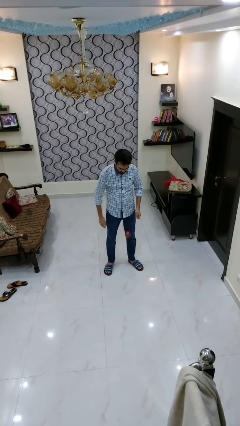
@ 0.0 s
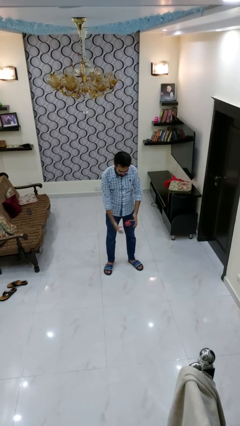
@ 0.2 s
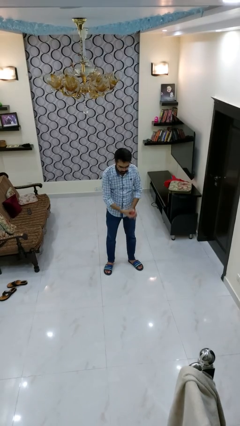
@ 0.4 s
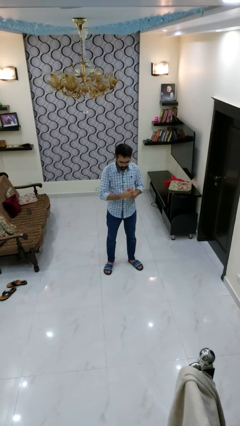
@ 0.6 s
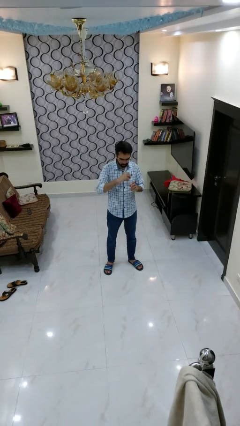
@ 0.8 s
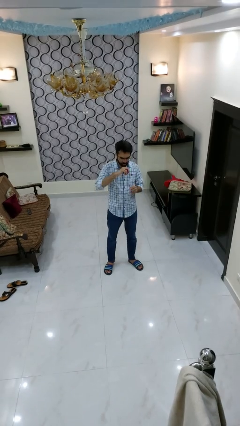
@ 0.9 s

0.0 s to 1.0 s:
person bounces ball on floor

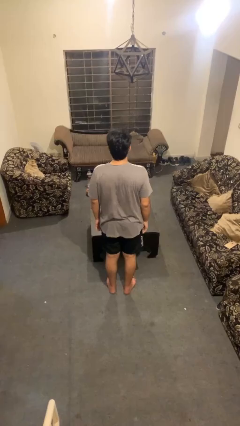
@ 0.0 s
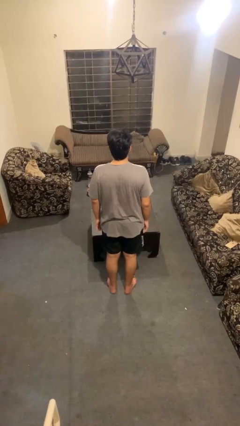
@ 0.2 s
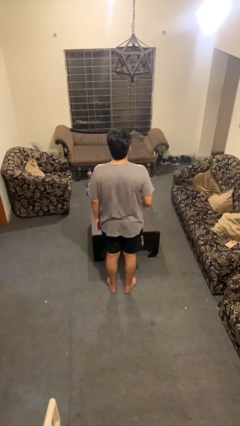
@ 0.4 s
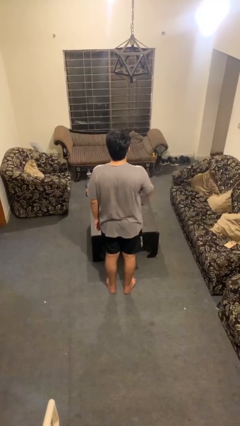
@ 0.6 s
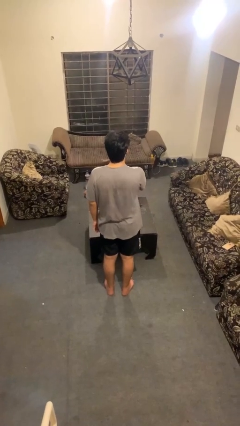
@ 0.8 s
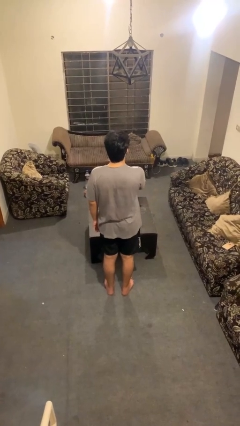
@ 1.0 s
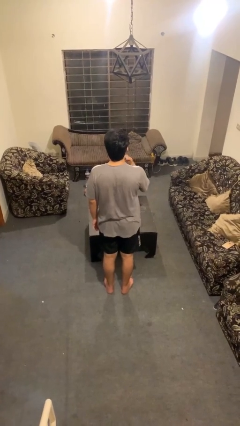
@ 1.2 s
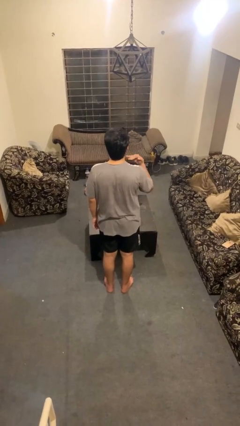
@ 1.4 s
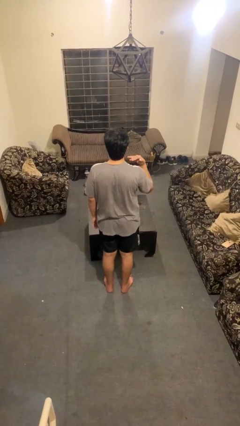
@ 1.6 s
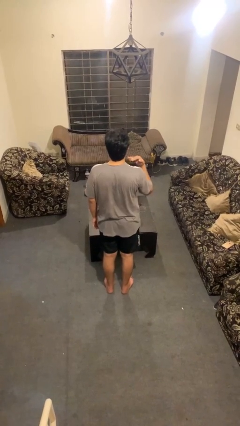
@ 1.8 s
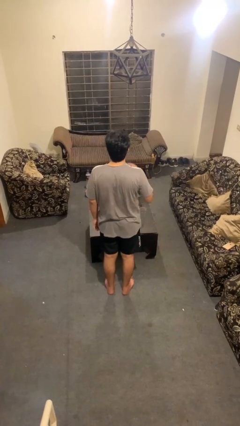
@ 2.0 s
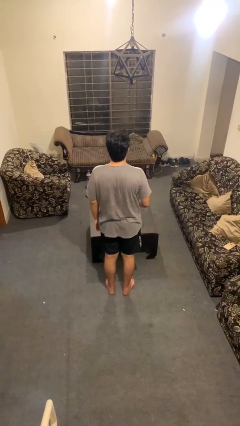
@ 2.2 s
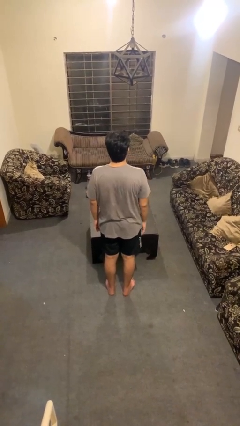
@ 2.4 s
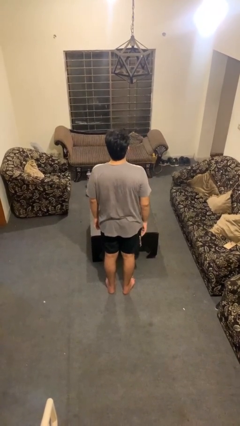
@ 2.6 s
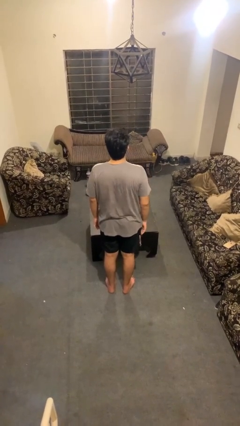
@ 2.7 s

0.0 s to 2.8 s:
person gestures cut

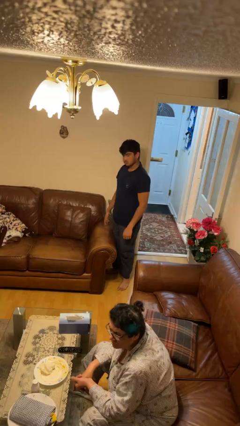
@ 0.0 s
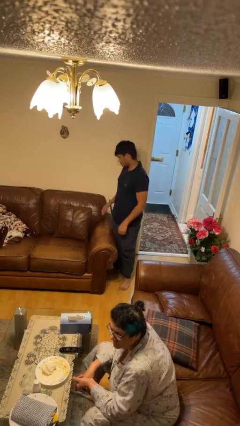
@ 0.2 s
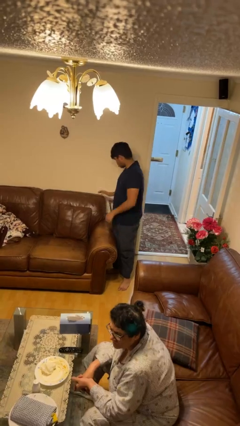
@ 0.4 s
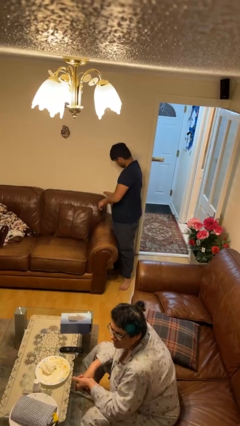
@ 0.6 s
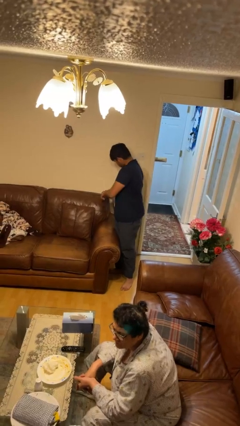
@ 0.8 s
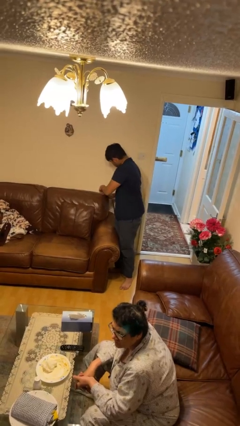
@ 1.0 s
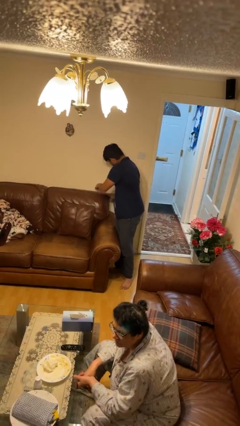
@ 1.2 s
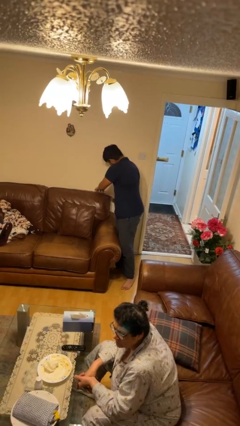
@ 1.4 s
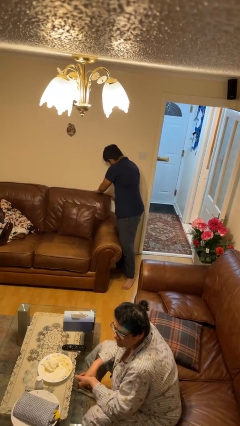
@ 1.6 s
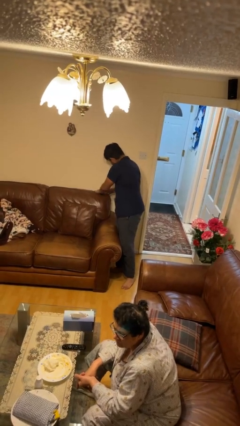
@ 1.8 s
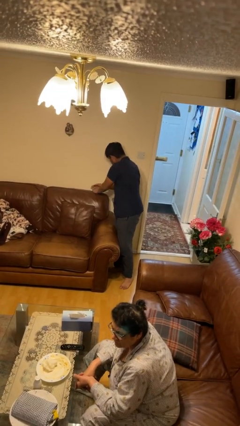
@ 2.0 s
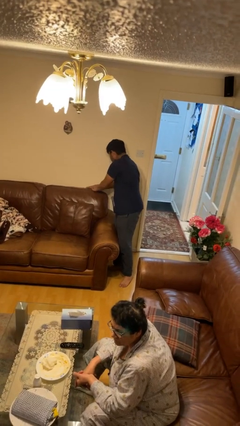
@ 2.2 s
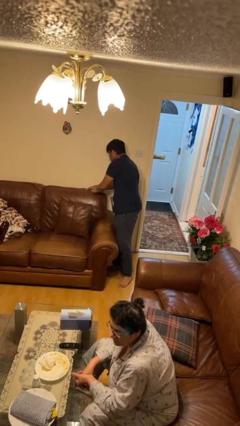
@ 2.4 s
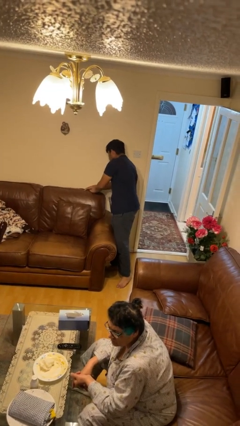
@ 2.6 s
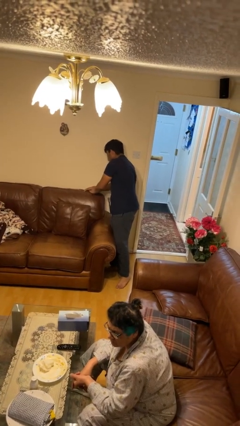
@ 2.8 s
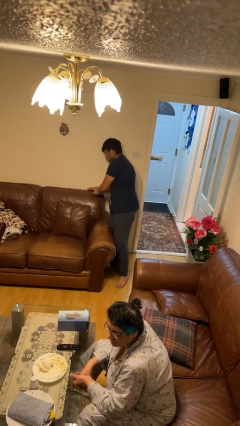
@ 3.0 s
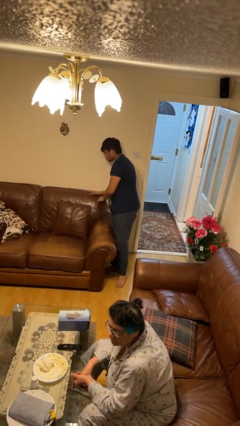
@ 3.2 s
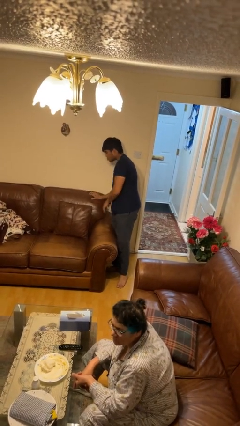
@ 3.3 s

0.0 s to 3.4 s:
person searches in couch

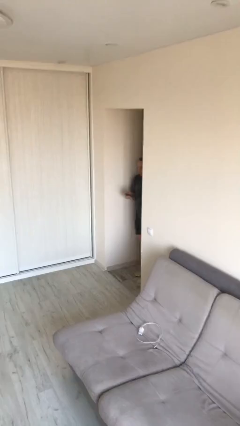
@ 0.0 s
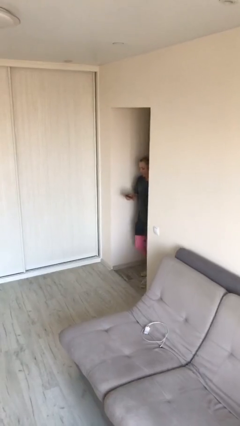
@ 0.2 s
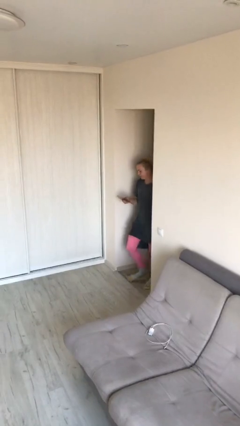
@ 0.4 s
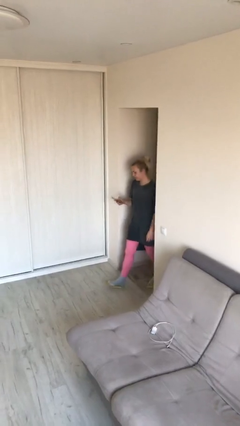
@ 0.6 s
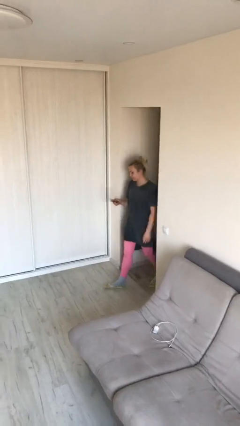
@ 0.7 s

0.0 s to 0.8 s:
person enters scene through structure

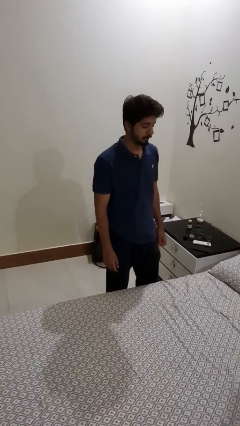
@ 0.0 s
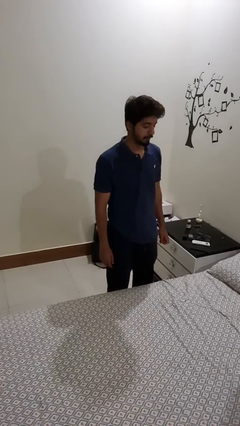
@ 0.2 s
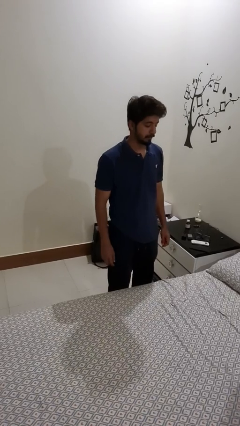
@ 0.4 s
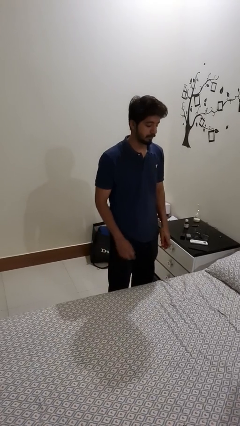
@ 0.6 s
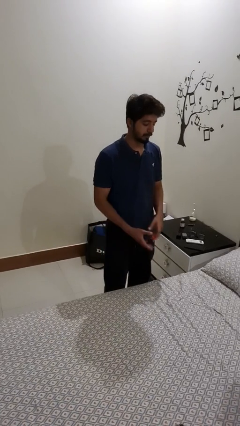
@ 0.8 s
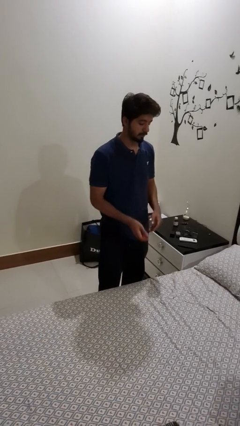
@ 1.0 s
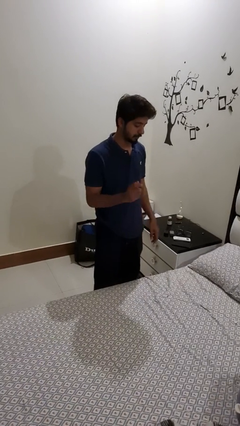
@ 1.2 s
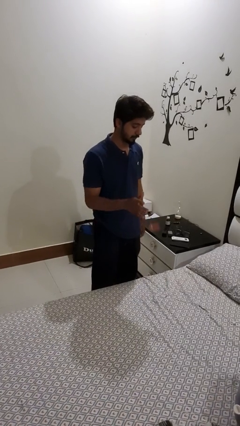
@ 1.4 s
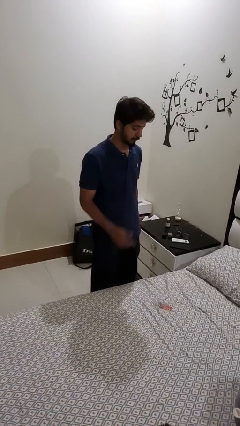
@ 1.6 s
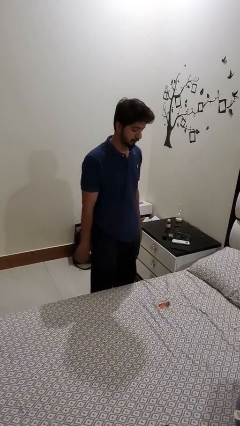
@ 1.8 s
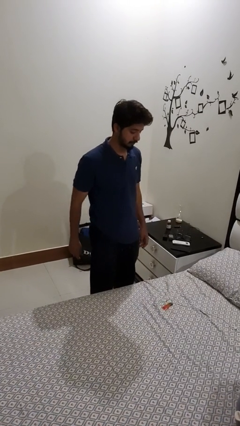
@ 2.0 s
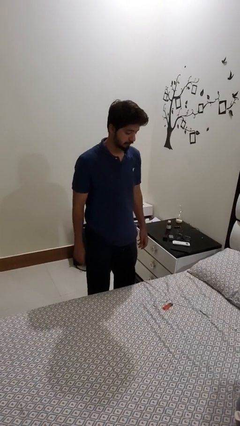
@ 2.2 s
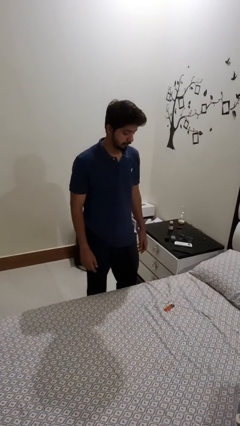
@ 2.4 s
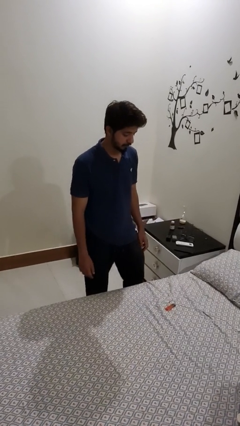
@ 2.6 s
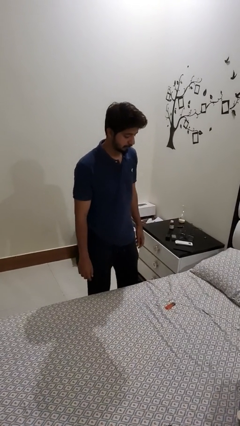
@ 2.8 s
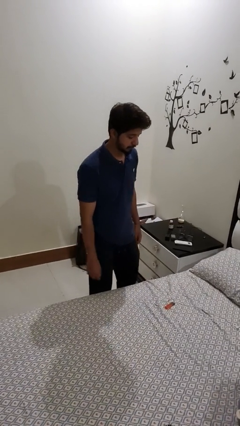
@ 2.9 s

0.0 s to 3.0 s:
person throws object on bed

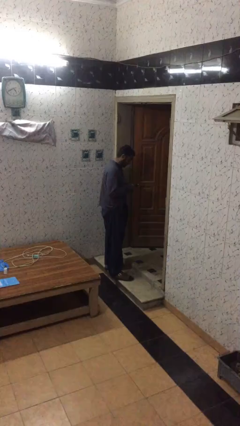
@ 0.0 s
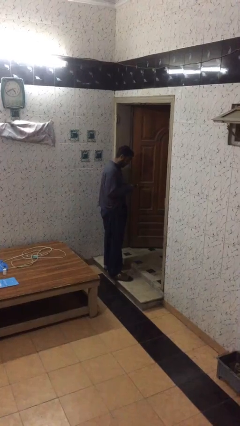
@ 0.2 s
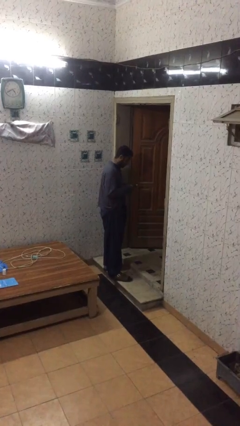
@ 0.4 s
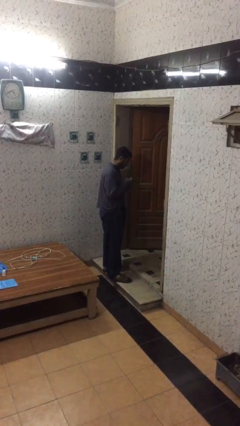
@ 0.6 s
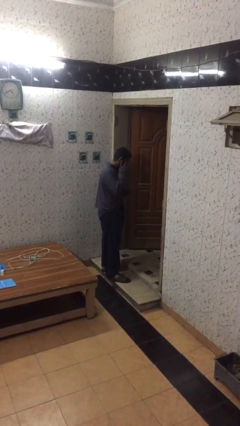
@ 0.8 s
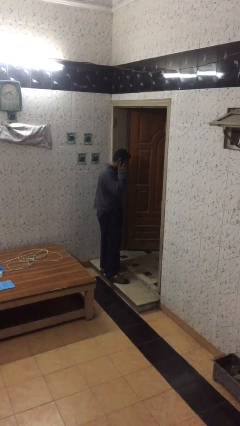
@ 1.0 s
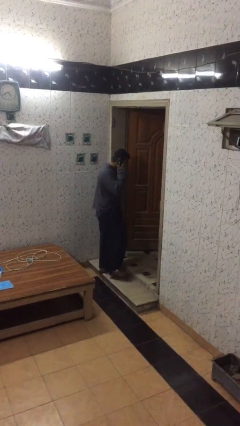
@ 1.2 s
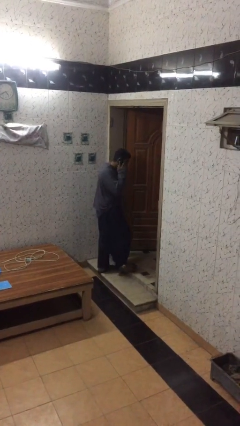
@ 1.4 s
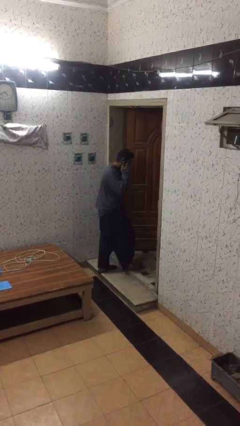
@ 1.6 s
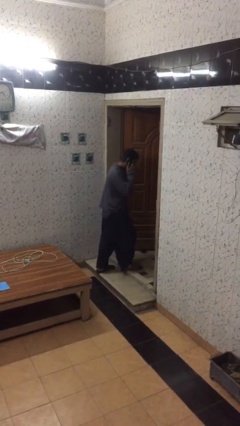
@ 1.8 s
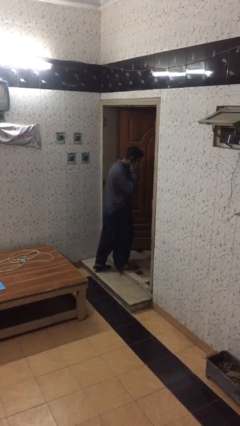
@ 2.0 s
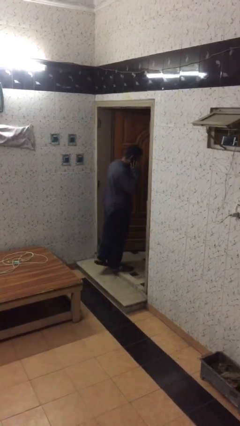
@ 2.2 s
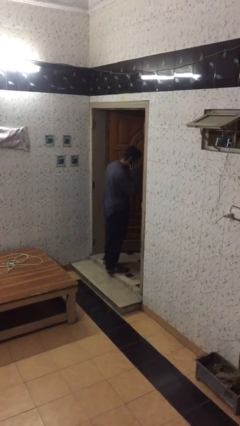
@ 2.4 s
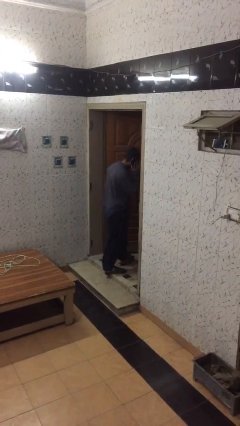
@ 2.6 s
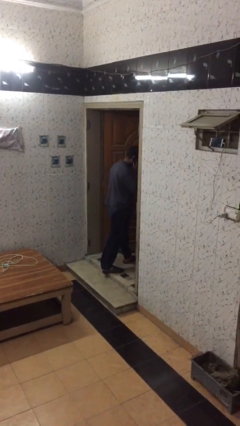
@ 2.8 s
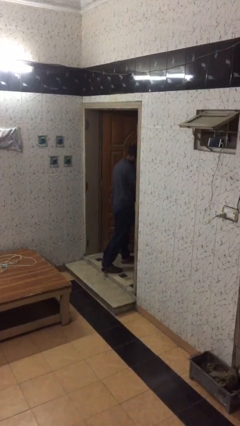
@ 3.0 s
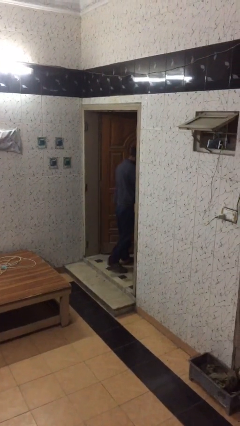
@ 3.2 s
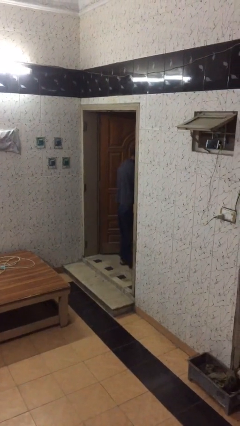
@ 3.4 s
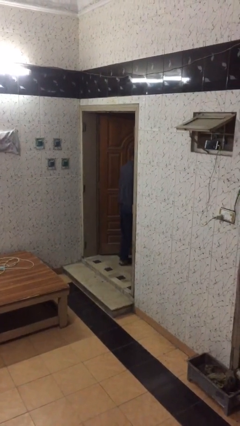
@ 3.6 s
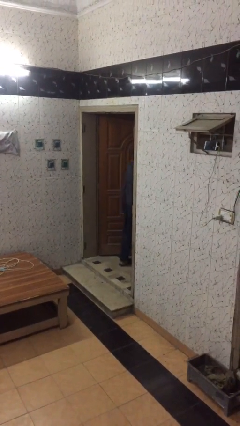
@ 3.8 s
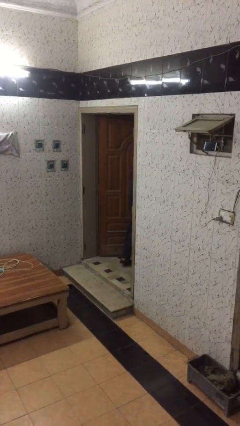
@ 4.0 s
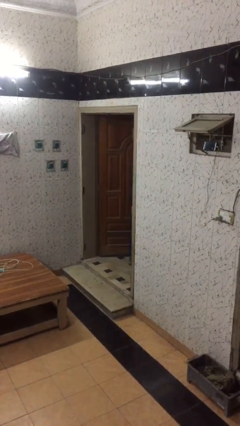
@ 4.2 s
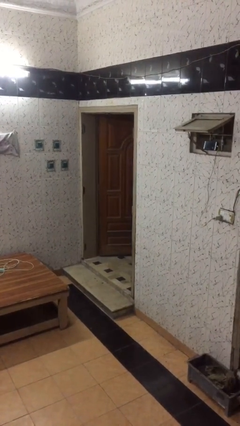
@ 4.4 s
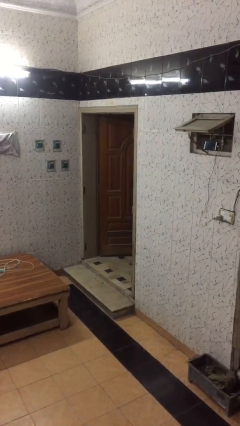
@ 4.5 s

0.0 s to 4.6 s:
person exits scene through structure

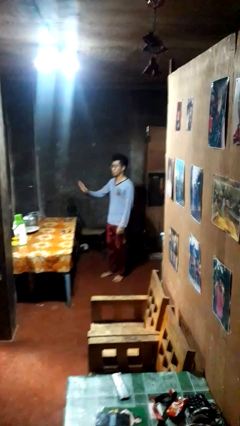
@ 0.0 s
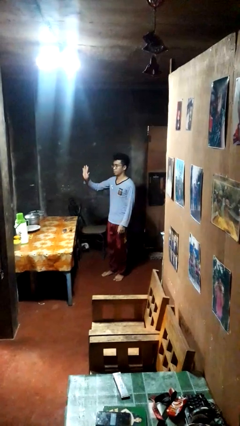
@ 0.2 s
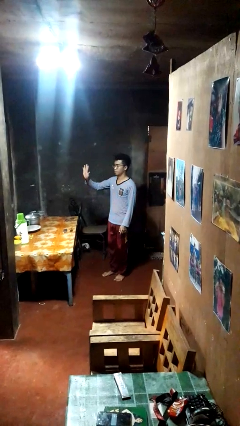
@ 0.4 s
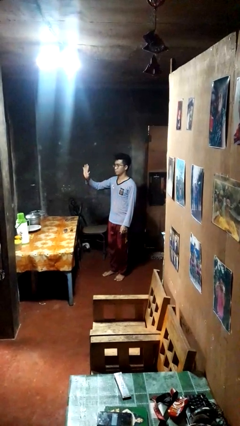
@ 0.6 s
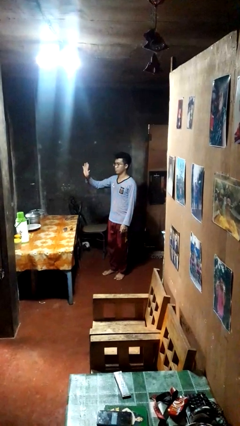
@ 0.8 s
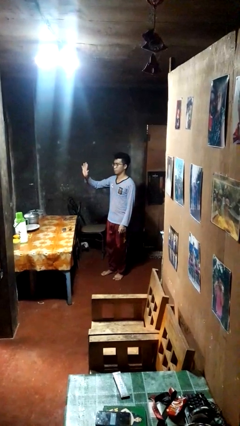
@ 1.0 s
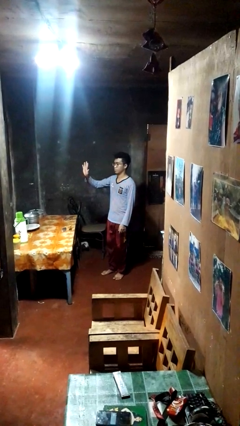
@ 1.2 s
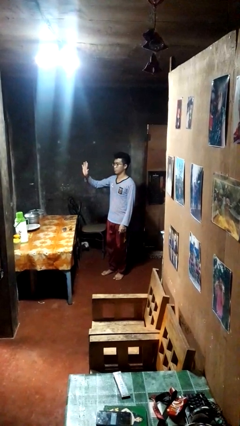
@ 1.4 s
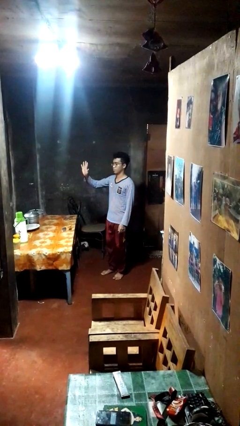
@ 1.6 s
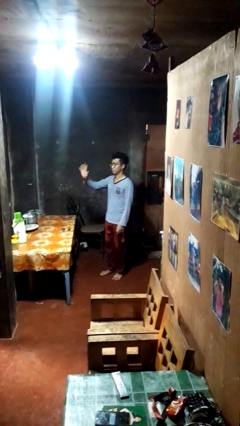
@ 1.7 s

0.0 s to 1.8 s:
person gestures number five

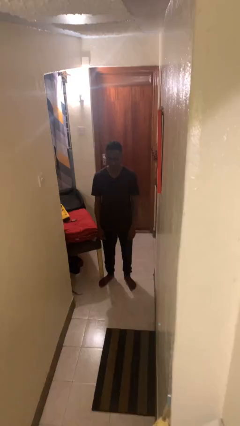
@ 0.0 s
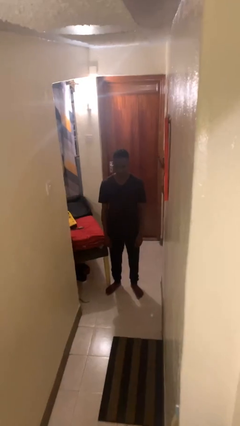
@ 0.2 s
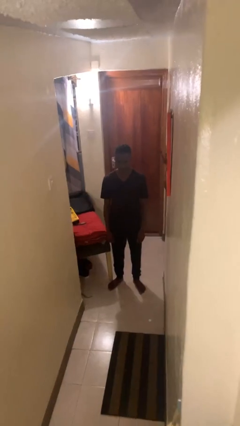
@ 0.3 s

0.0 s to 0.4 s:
person licks fingers
